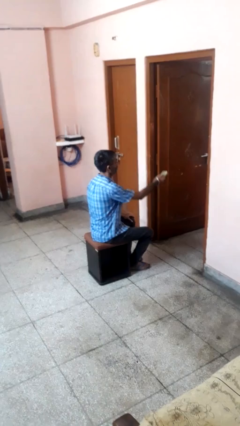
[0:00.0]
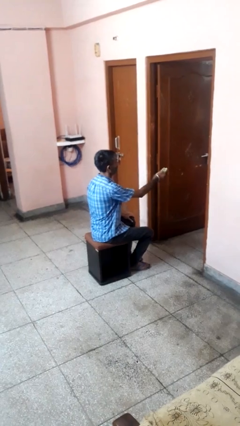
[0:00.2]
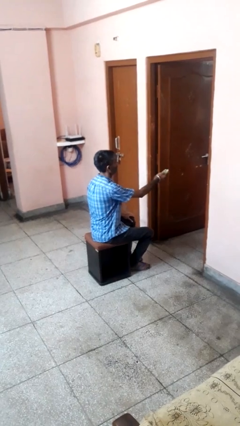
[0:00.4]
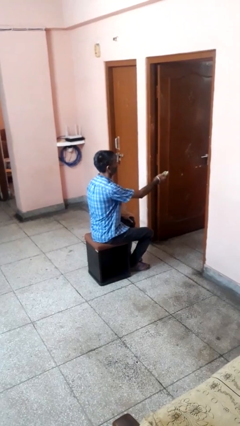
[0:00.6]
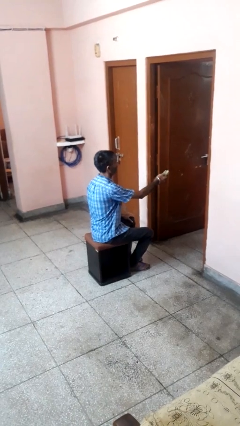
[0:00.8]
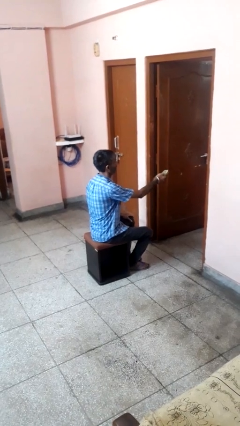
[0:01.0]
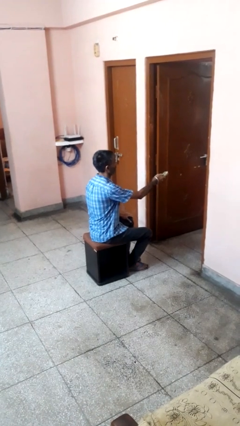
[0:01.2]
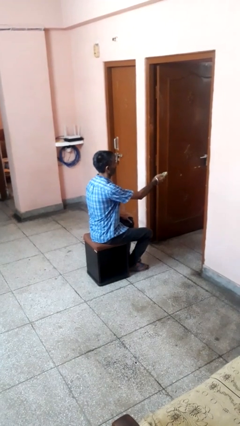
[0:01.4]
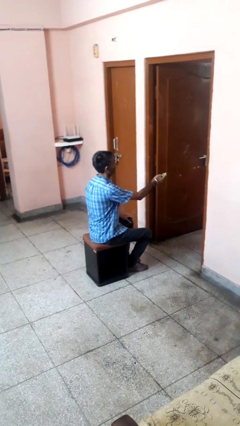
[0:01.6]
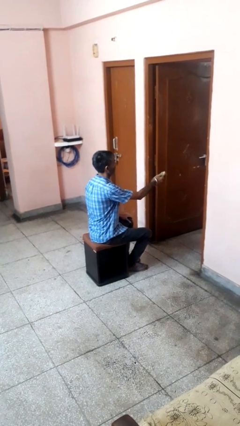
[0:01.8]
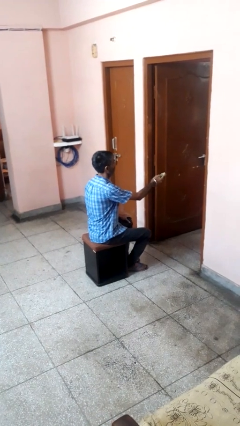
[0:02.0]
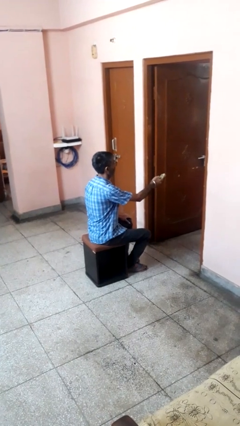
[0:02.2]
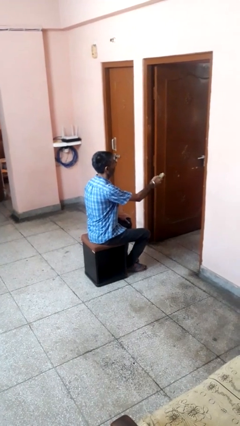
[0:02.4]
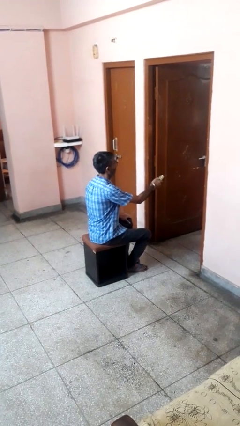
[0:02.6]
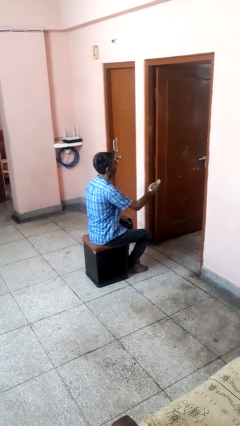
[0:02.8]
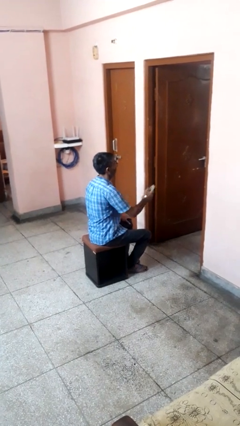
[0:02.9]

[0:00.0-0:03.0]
person uses television remote

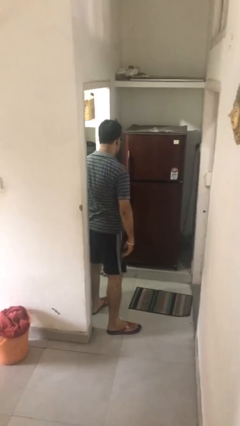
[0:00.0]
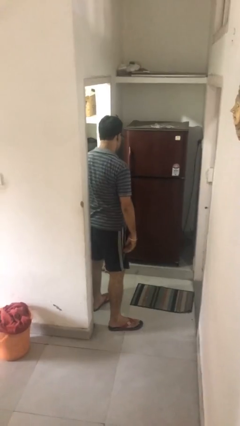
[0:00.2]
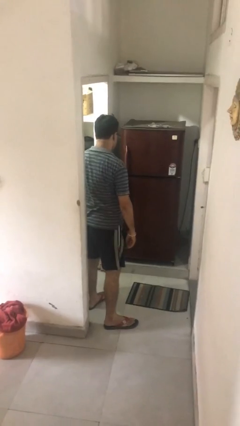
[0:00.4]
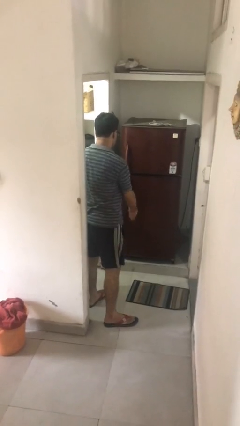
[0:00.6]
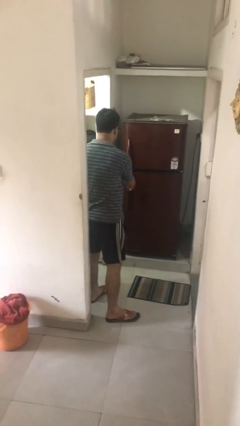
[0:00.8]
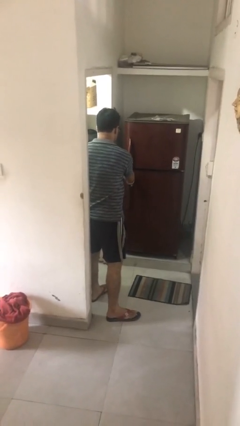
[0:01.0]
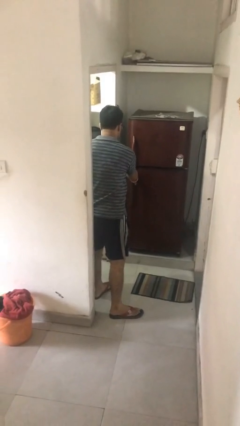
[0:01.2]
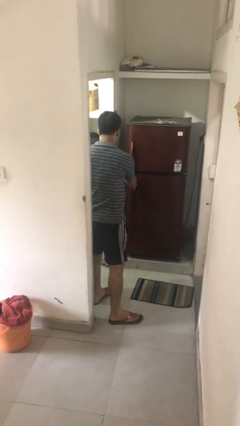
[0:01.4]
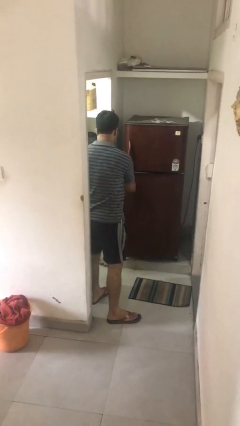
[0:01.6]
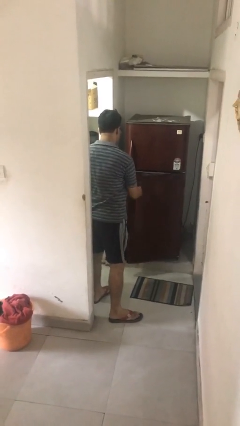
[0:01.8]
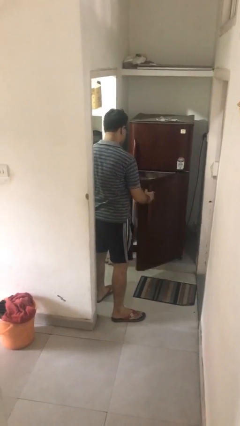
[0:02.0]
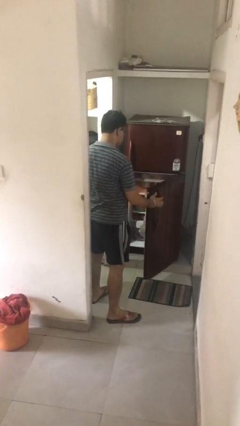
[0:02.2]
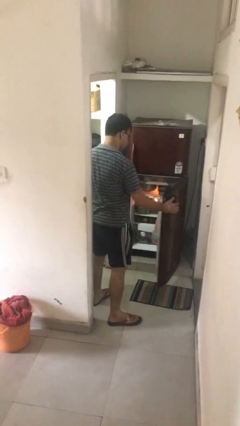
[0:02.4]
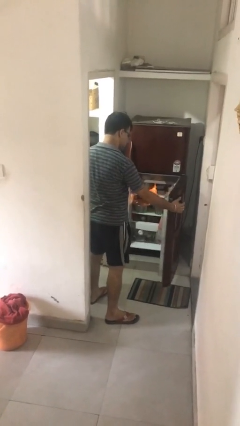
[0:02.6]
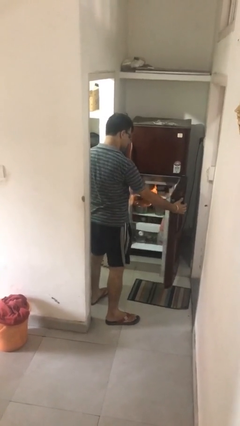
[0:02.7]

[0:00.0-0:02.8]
person opens refrigerator

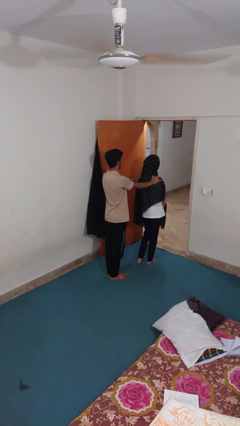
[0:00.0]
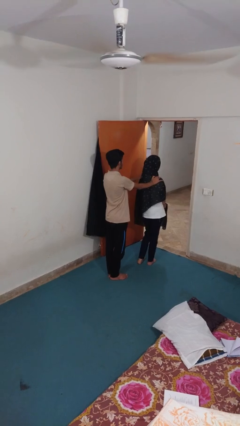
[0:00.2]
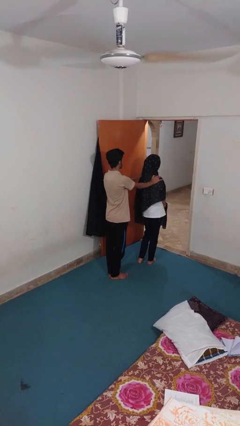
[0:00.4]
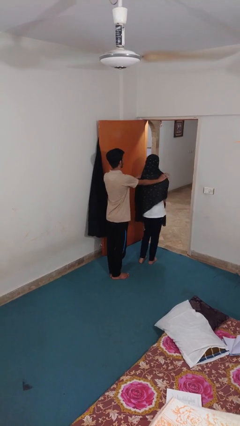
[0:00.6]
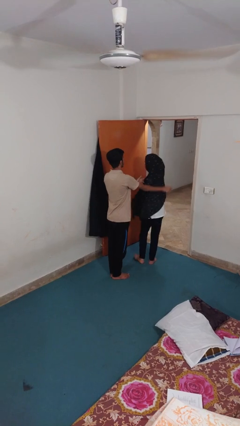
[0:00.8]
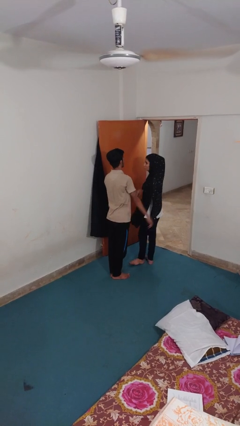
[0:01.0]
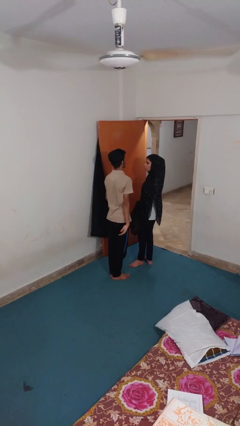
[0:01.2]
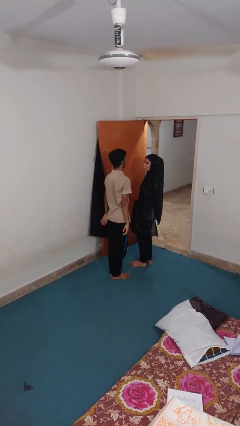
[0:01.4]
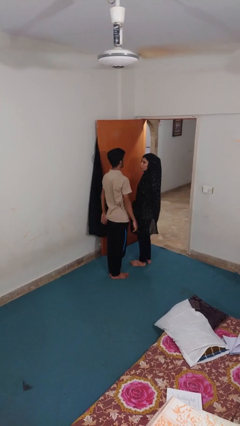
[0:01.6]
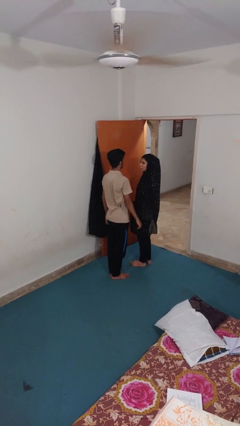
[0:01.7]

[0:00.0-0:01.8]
person spins person around

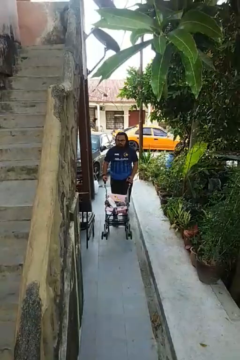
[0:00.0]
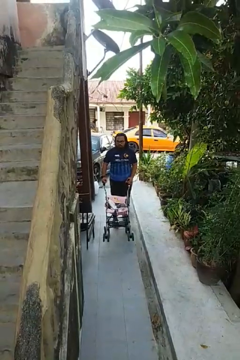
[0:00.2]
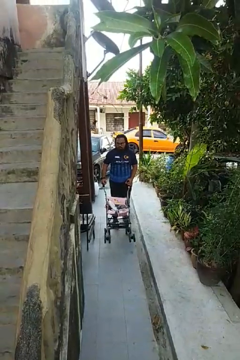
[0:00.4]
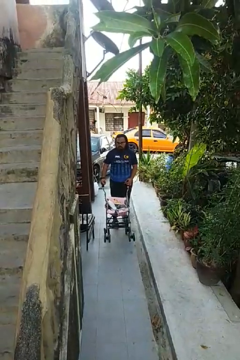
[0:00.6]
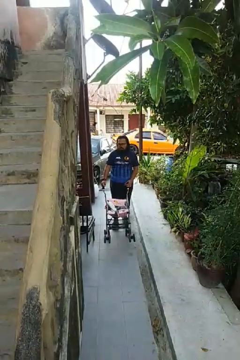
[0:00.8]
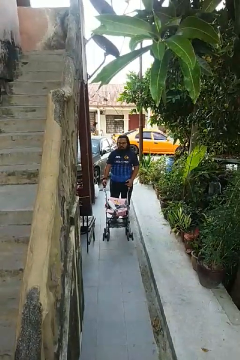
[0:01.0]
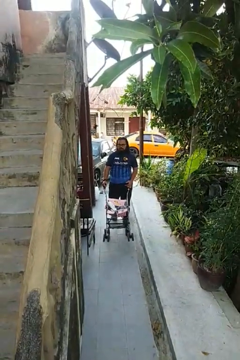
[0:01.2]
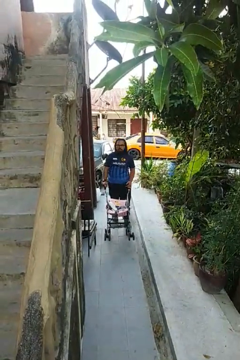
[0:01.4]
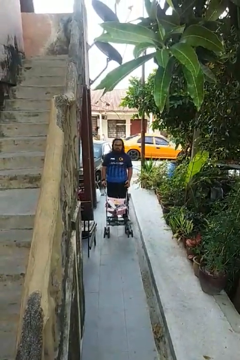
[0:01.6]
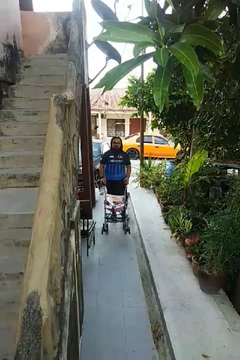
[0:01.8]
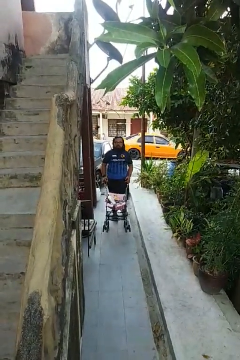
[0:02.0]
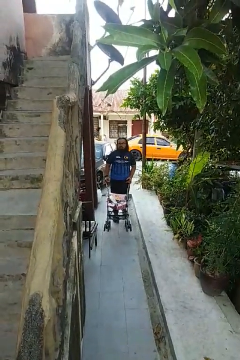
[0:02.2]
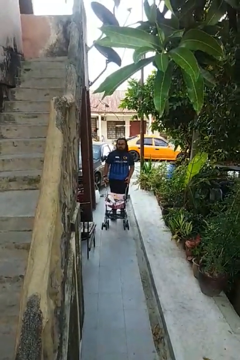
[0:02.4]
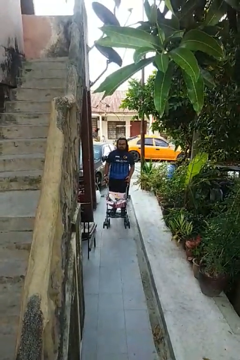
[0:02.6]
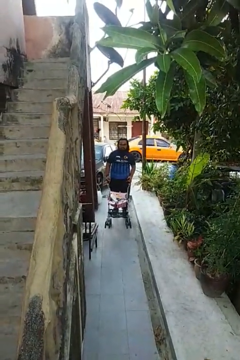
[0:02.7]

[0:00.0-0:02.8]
person pulls wheeled cart

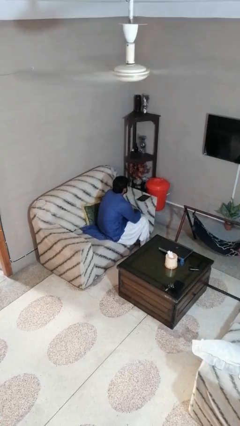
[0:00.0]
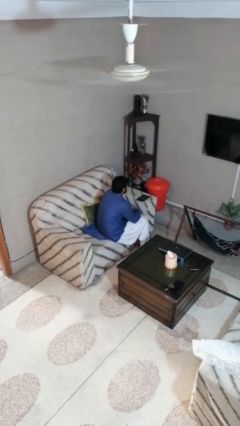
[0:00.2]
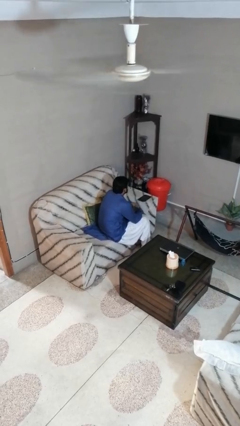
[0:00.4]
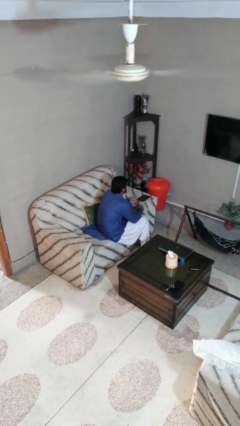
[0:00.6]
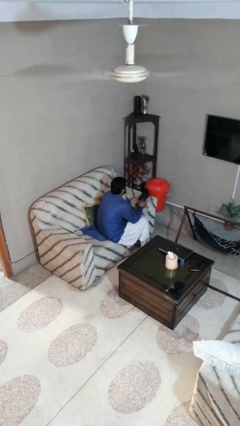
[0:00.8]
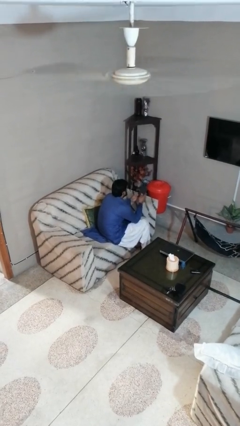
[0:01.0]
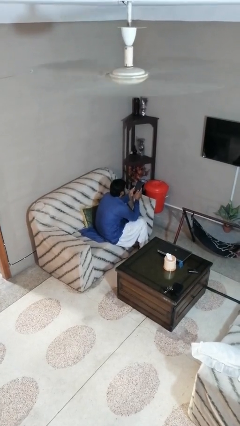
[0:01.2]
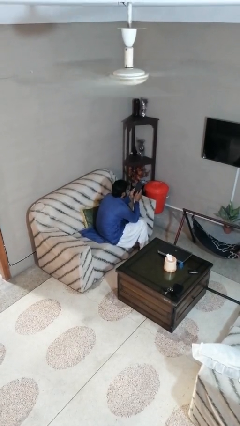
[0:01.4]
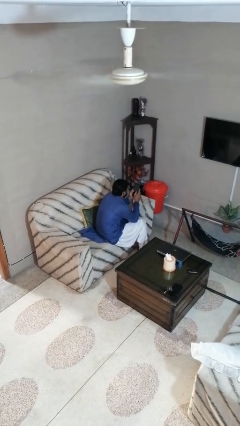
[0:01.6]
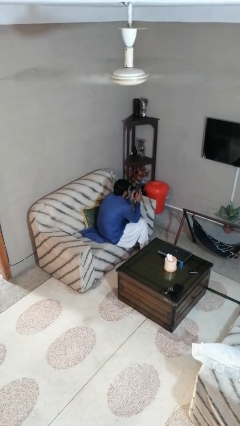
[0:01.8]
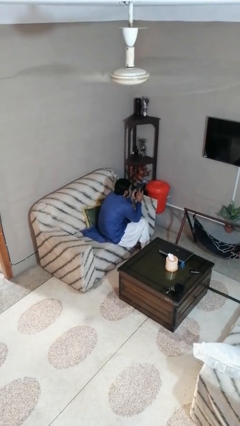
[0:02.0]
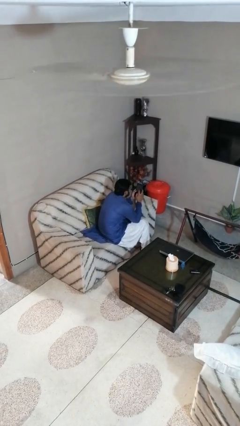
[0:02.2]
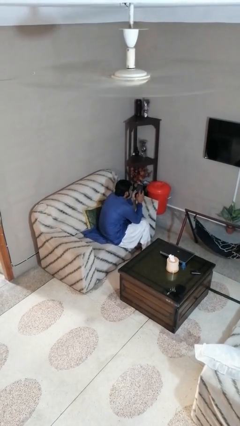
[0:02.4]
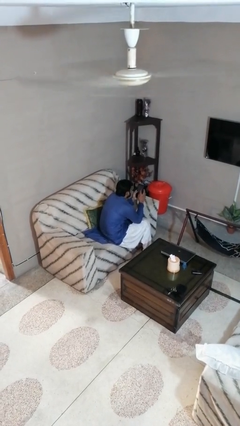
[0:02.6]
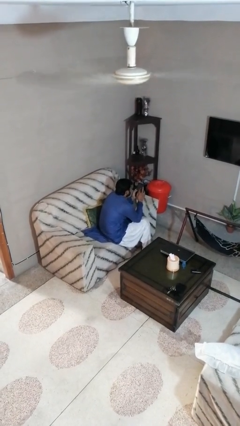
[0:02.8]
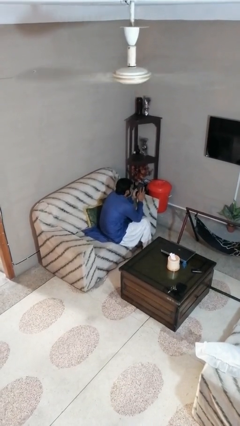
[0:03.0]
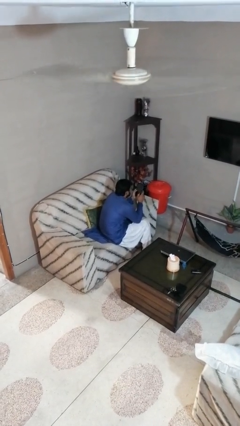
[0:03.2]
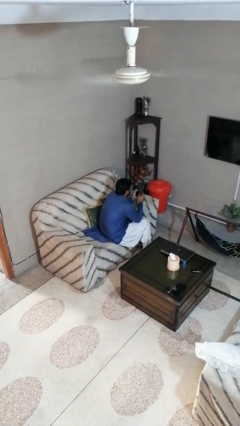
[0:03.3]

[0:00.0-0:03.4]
person interacts with tablet

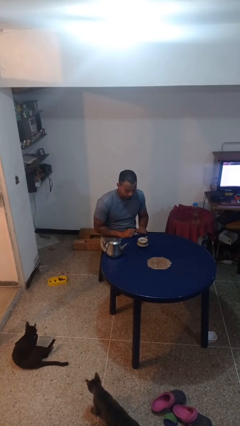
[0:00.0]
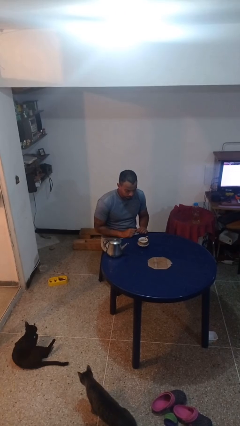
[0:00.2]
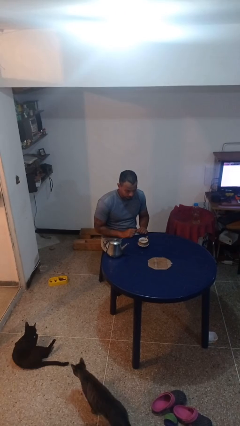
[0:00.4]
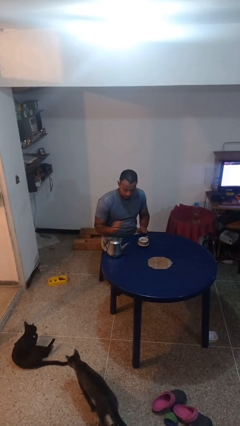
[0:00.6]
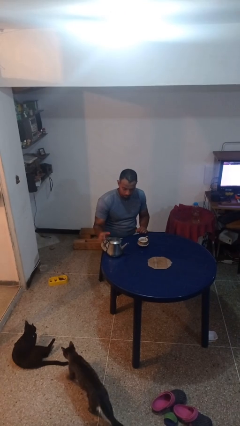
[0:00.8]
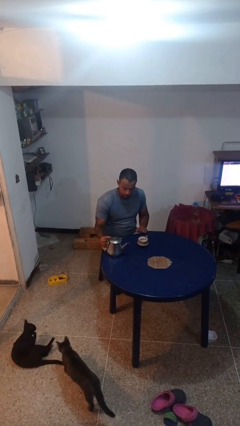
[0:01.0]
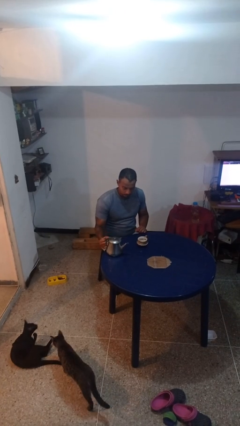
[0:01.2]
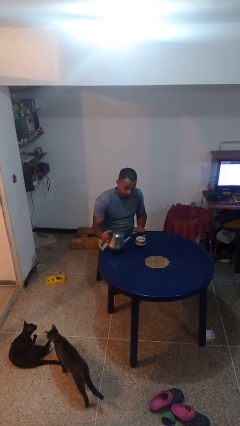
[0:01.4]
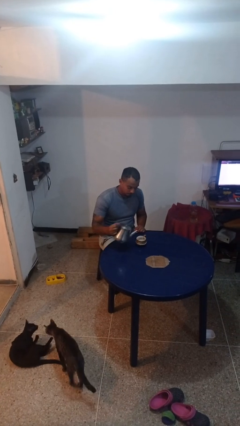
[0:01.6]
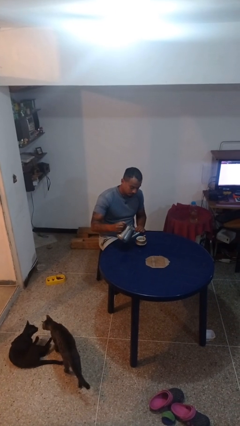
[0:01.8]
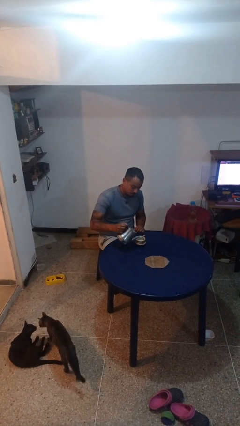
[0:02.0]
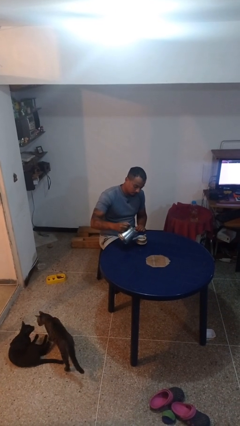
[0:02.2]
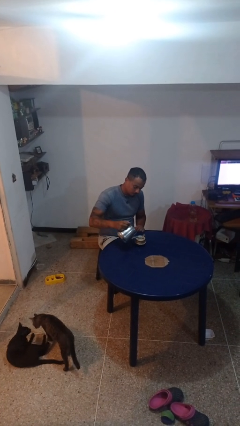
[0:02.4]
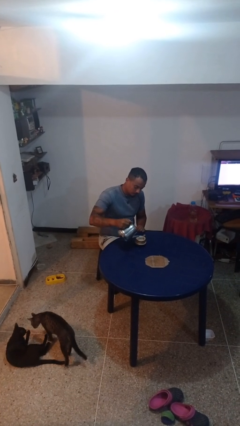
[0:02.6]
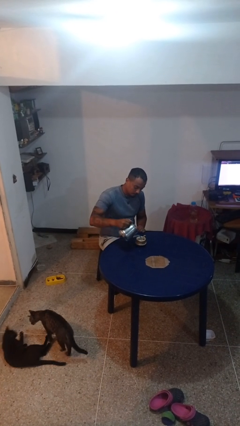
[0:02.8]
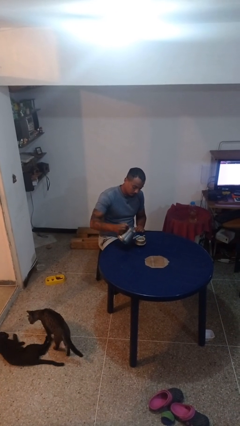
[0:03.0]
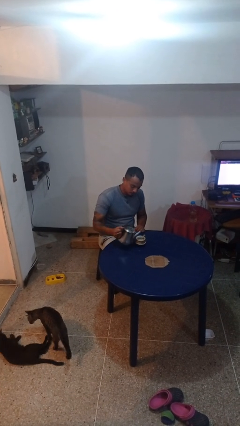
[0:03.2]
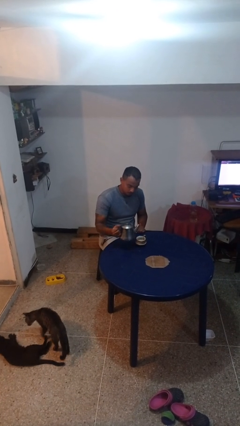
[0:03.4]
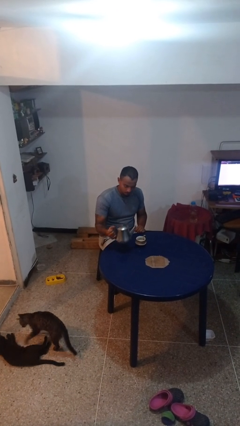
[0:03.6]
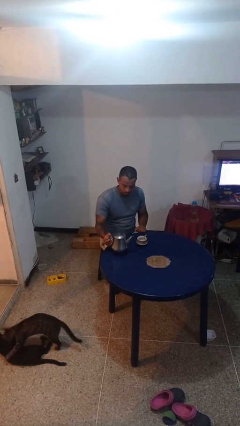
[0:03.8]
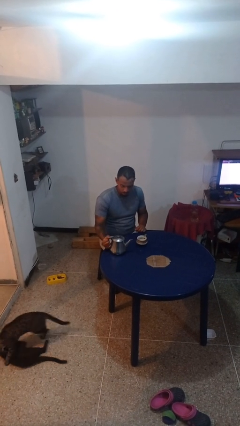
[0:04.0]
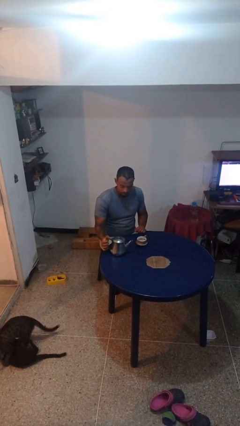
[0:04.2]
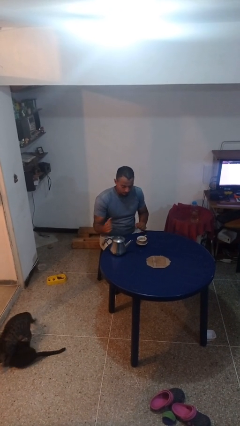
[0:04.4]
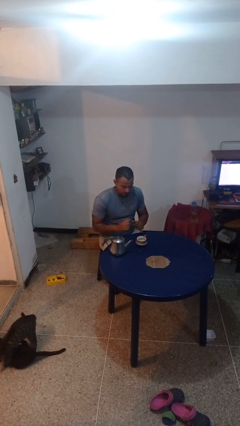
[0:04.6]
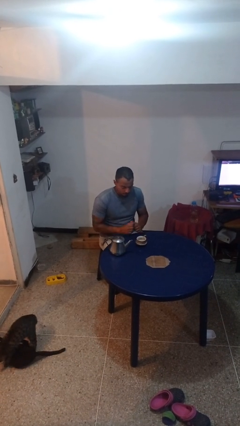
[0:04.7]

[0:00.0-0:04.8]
person pours coffee into mug
